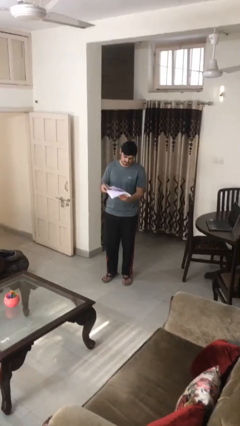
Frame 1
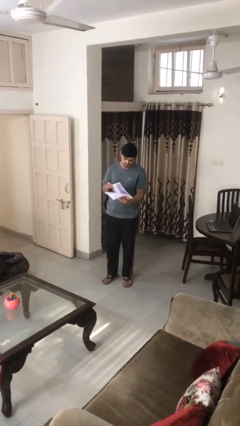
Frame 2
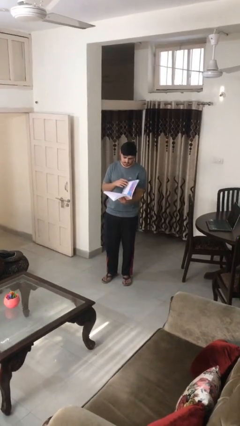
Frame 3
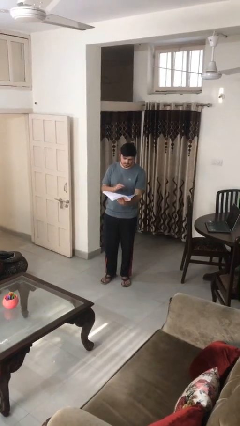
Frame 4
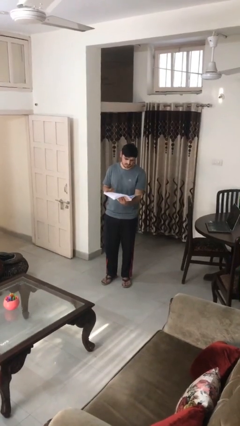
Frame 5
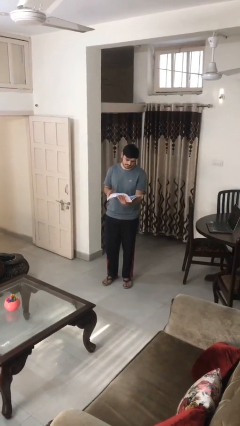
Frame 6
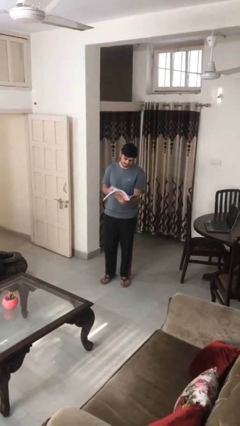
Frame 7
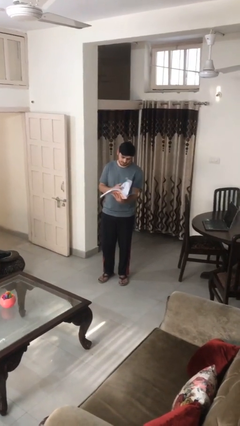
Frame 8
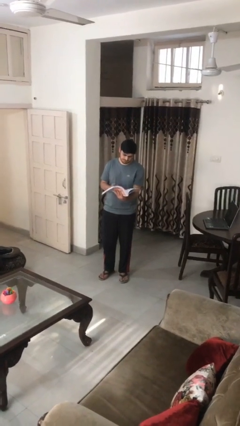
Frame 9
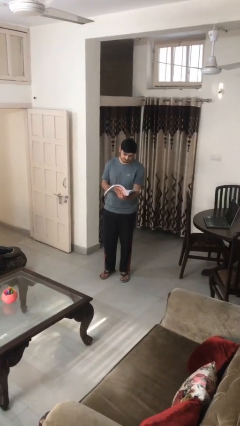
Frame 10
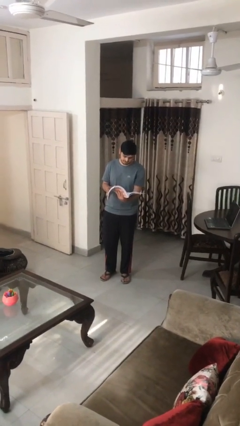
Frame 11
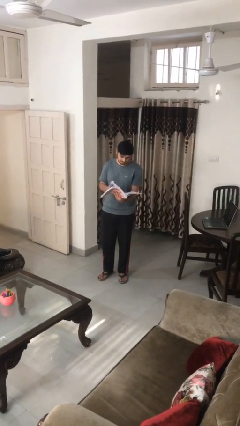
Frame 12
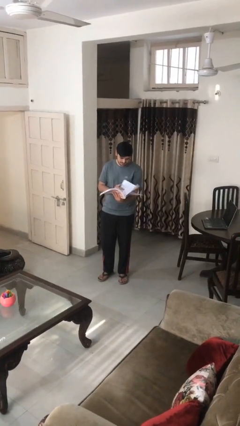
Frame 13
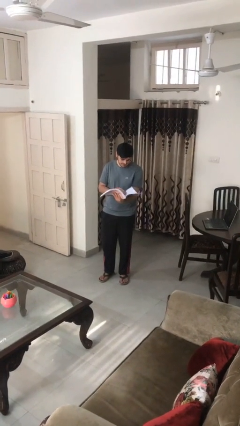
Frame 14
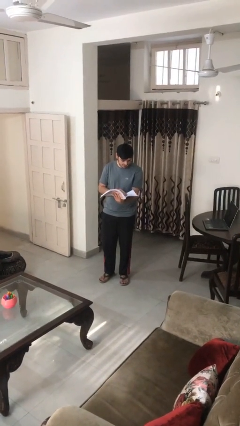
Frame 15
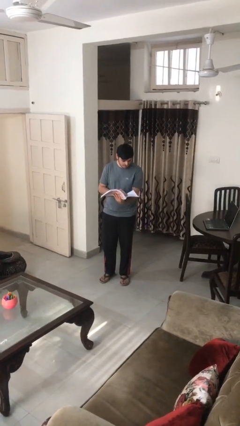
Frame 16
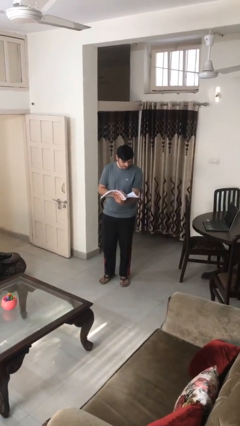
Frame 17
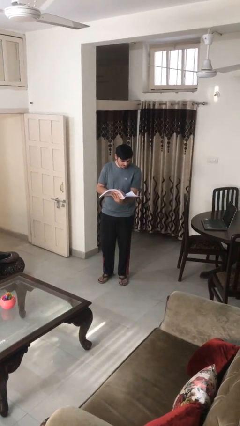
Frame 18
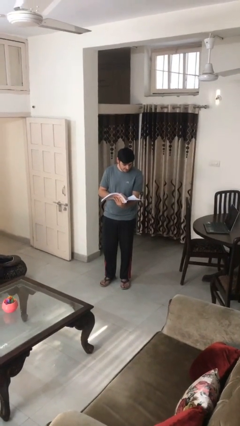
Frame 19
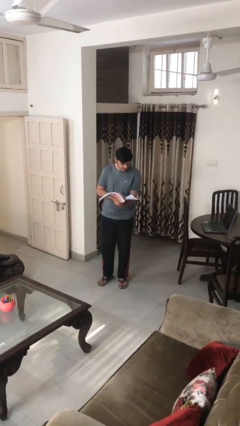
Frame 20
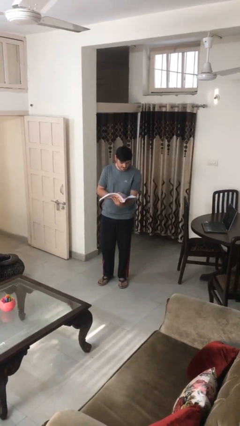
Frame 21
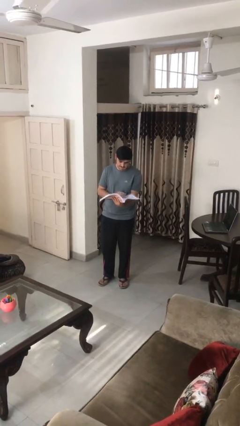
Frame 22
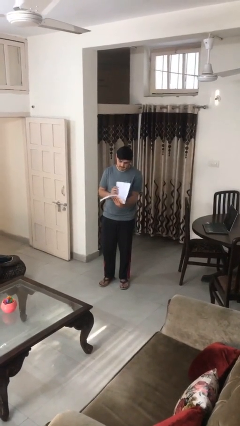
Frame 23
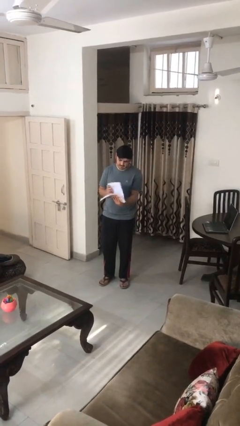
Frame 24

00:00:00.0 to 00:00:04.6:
person reads document

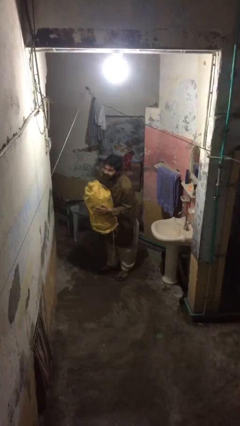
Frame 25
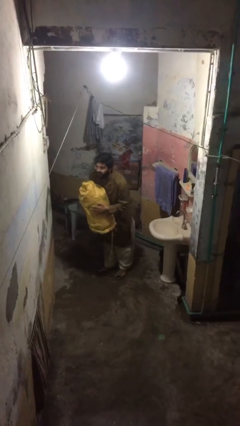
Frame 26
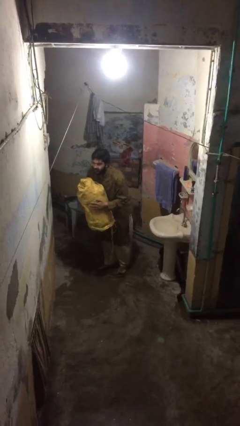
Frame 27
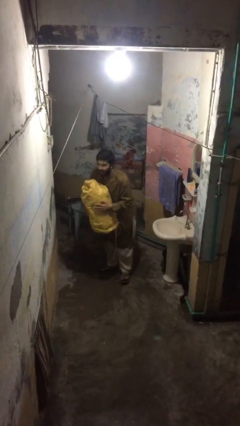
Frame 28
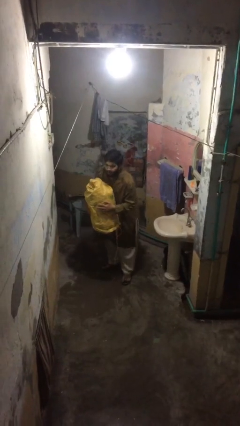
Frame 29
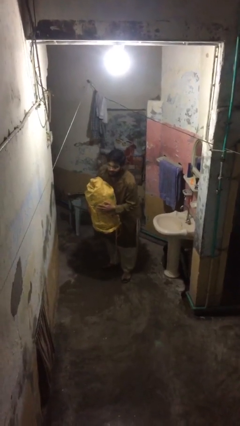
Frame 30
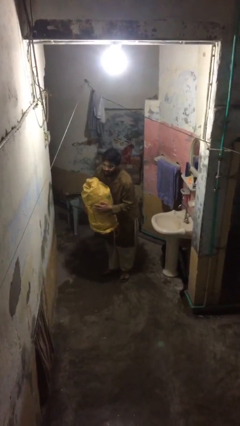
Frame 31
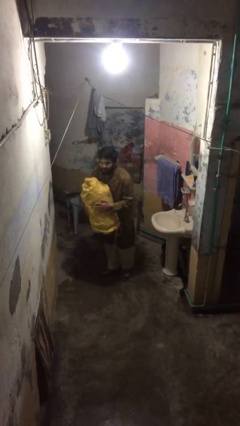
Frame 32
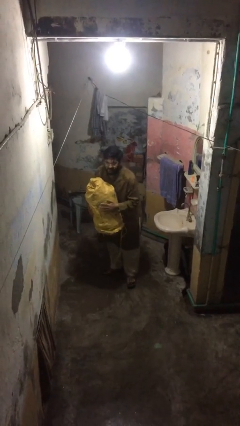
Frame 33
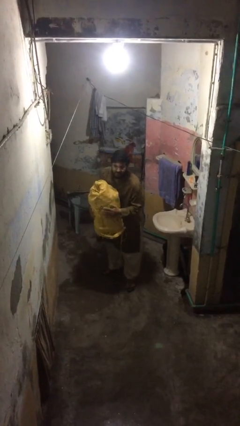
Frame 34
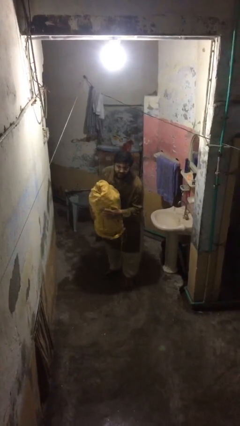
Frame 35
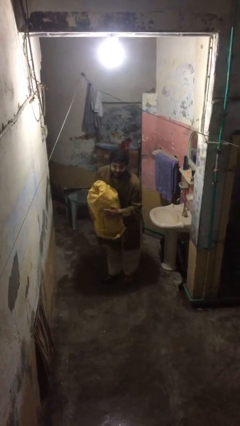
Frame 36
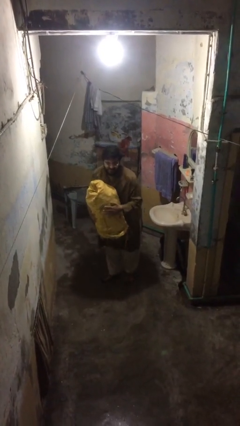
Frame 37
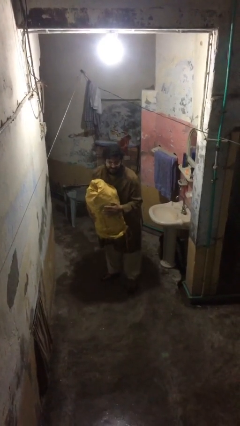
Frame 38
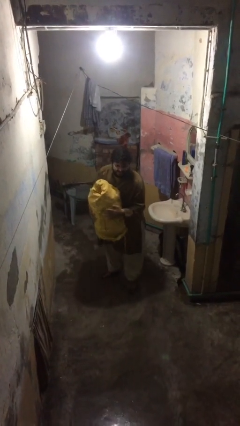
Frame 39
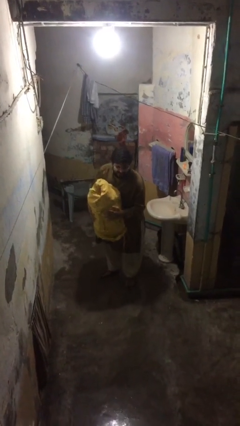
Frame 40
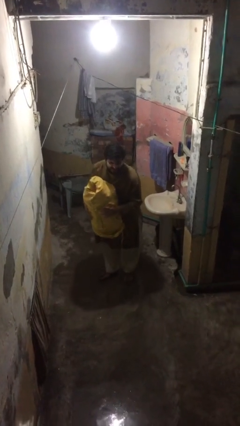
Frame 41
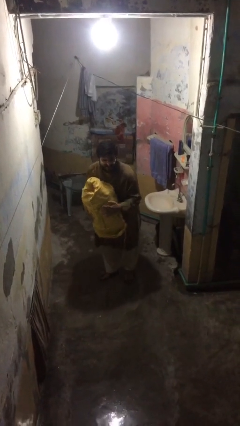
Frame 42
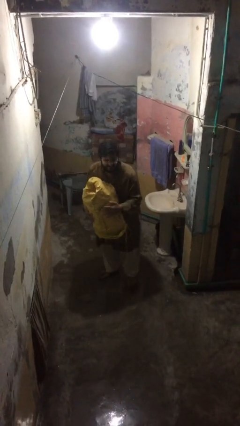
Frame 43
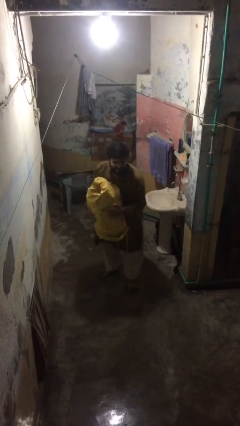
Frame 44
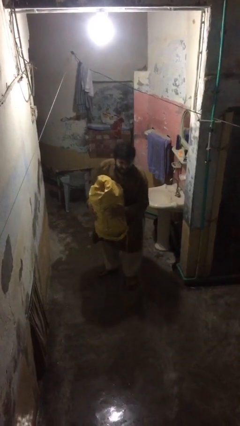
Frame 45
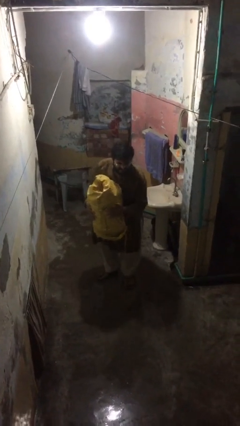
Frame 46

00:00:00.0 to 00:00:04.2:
person carries heavy object

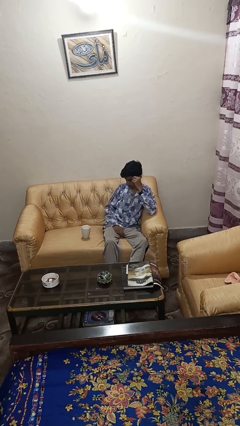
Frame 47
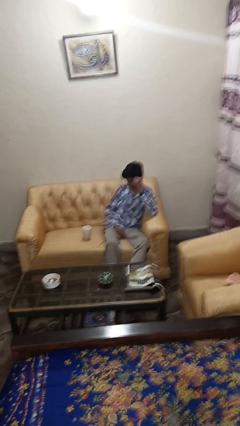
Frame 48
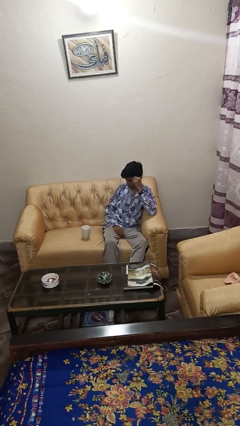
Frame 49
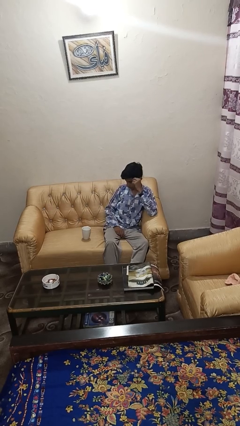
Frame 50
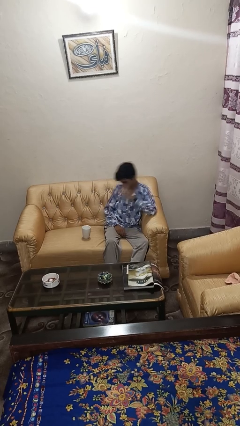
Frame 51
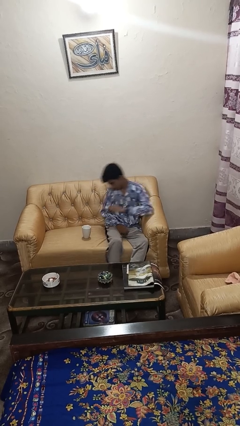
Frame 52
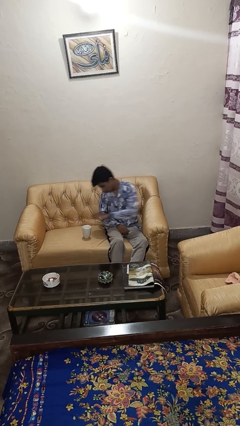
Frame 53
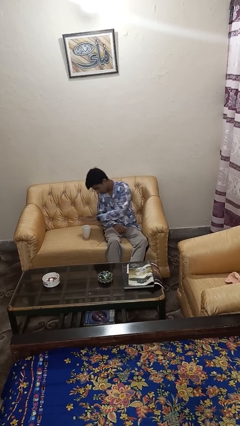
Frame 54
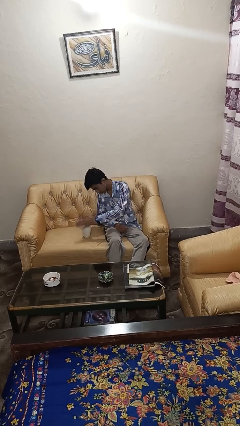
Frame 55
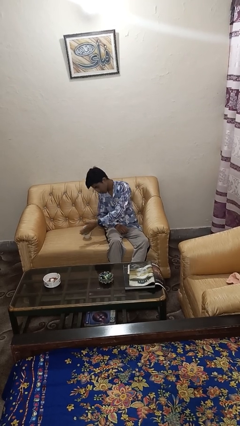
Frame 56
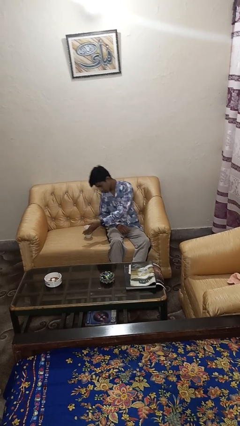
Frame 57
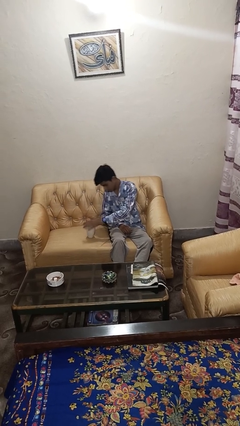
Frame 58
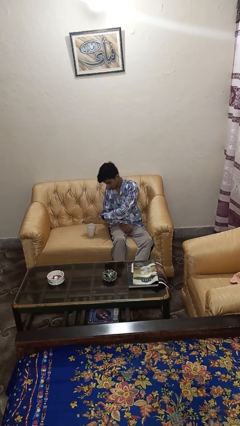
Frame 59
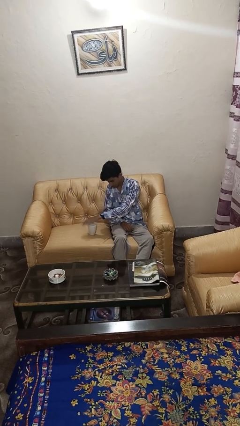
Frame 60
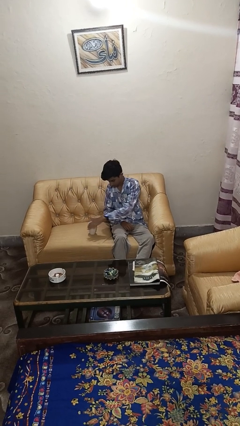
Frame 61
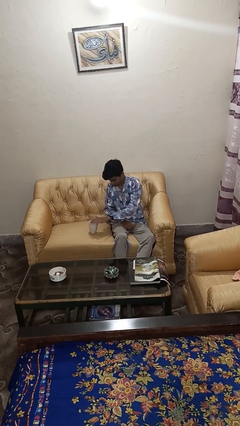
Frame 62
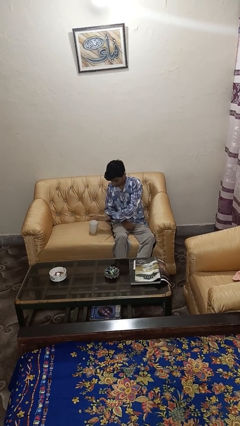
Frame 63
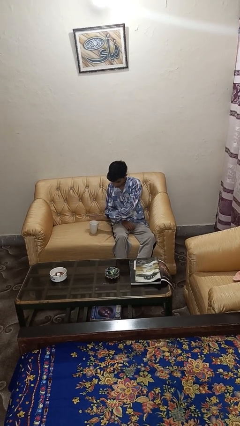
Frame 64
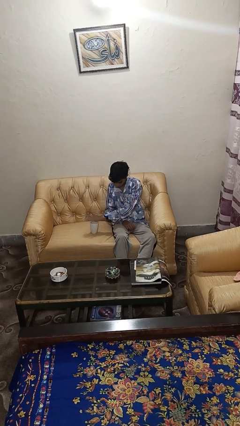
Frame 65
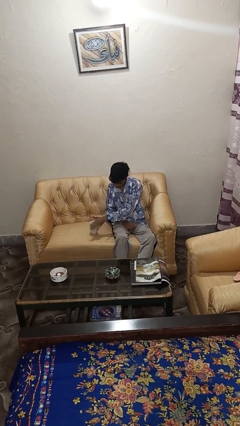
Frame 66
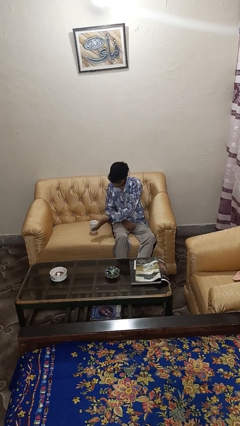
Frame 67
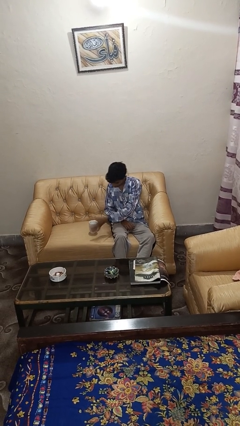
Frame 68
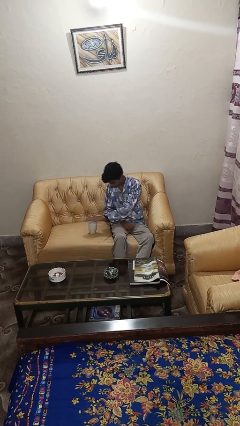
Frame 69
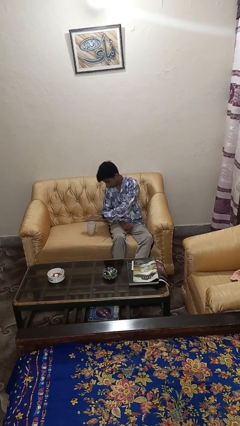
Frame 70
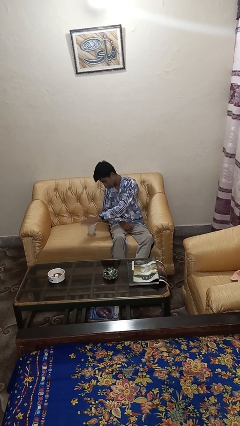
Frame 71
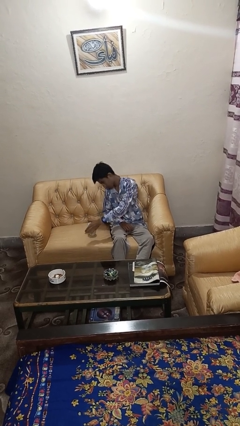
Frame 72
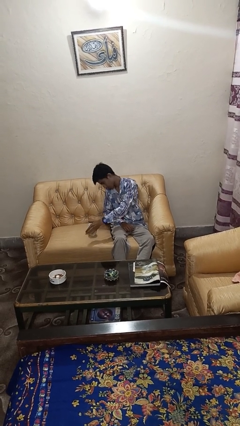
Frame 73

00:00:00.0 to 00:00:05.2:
person waves hand over object

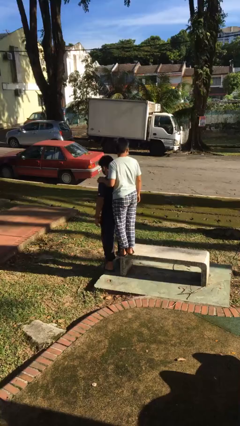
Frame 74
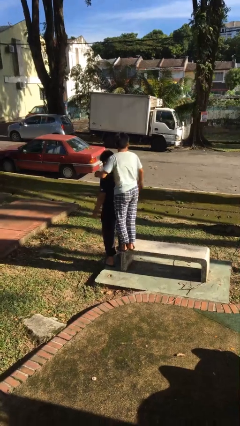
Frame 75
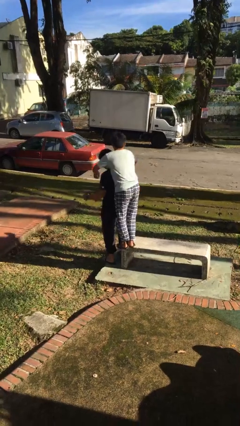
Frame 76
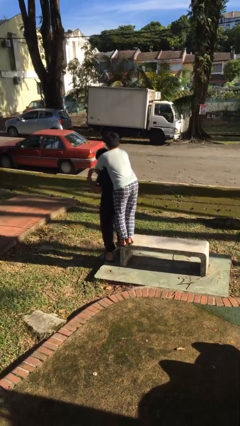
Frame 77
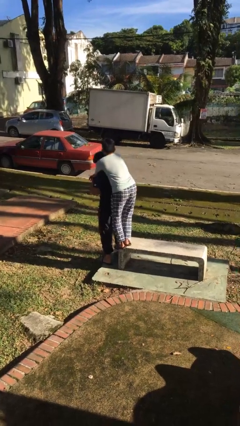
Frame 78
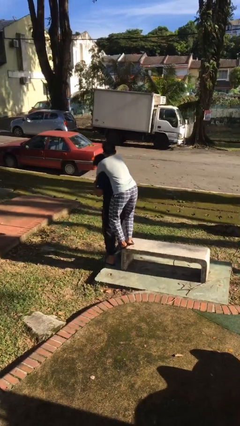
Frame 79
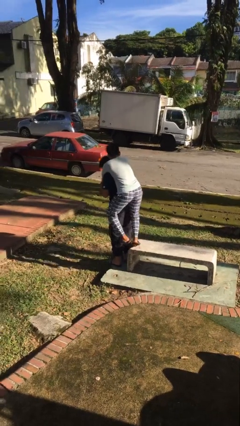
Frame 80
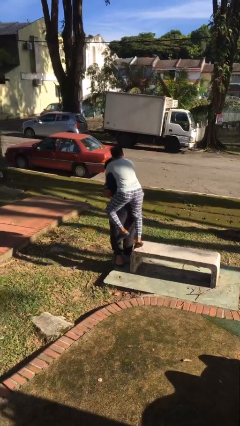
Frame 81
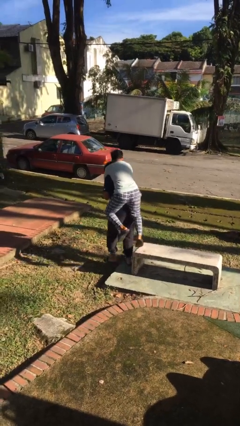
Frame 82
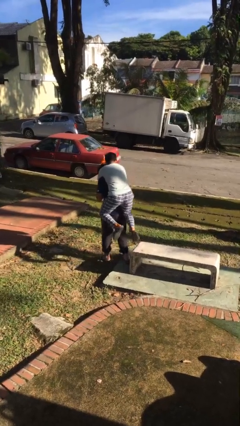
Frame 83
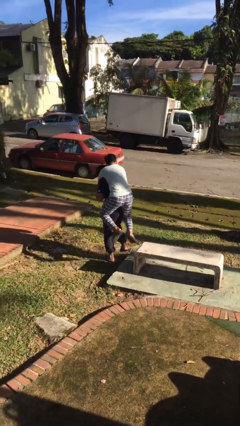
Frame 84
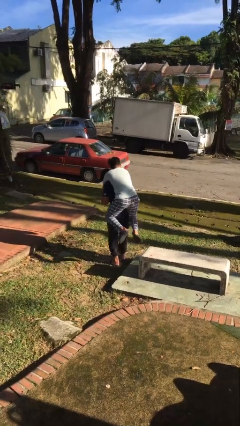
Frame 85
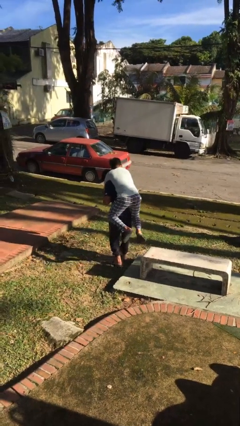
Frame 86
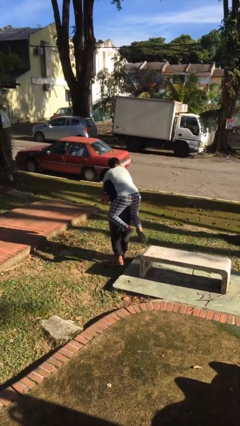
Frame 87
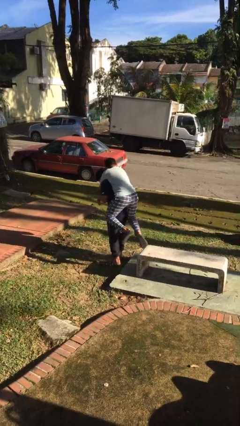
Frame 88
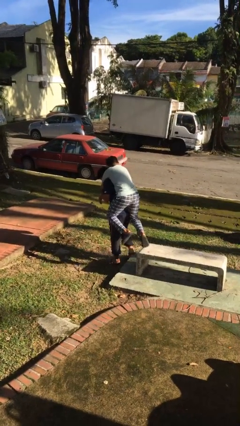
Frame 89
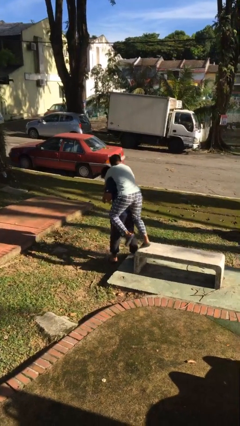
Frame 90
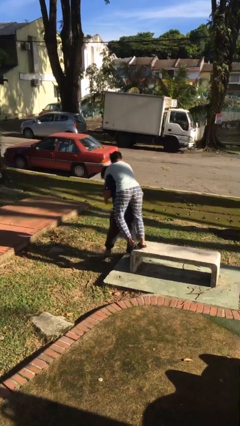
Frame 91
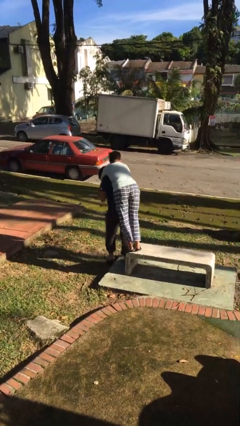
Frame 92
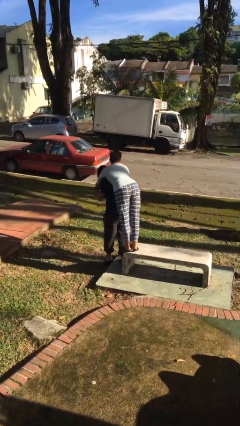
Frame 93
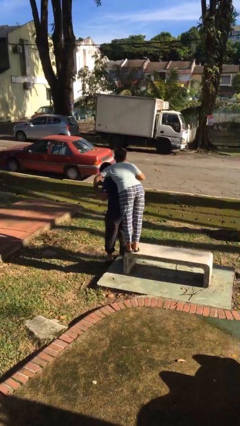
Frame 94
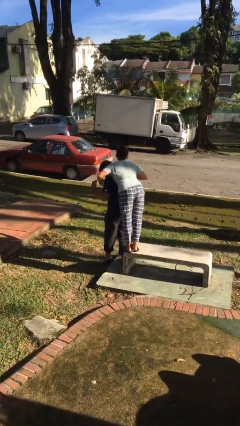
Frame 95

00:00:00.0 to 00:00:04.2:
person carries person on back
